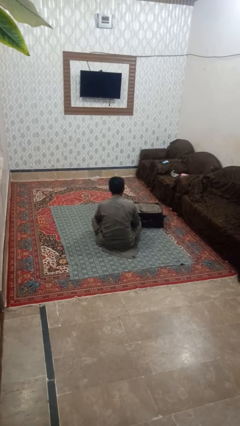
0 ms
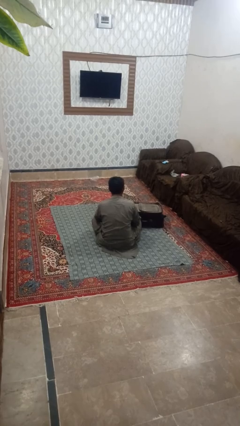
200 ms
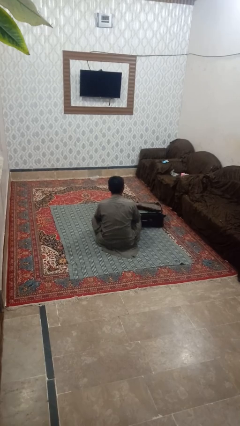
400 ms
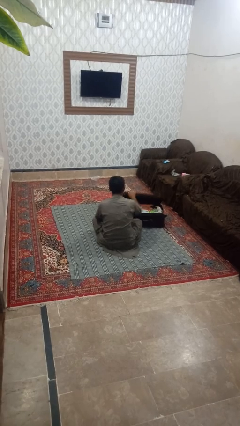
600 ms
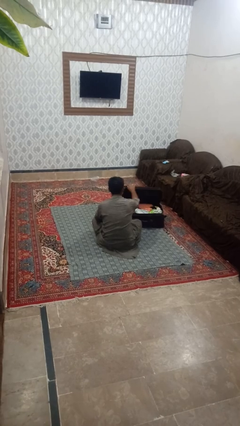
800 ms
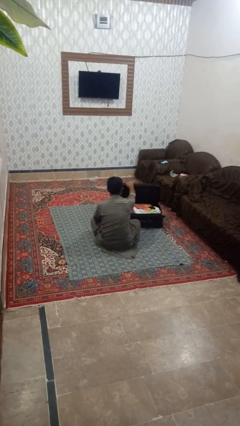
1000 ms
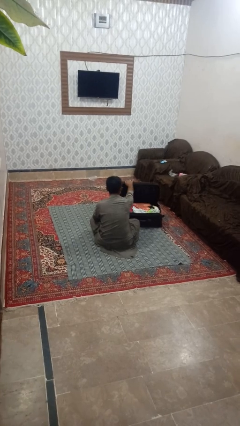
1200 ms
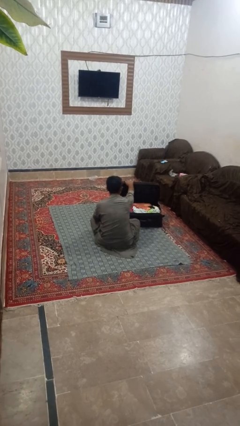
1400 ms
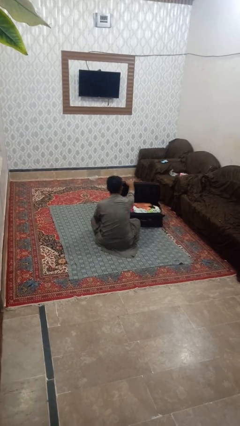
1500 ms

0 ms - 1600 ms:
person opens suitcase

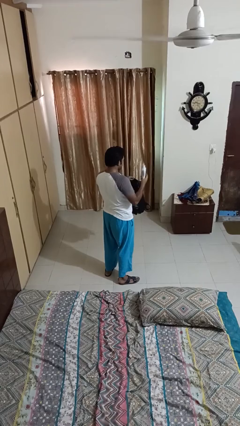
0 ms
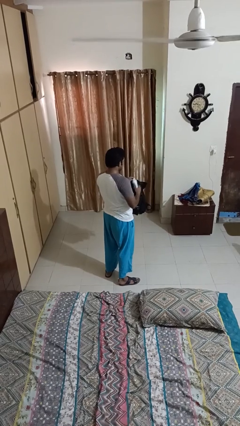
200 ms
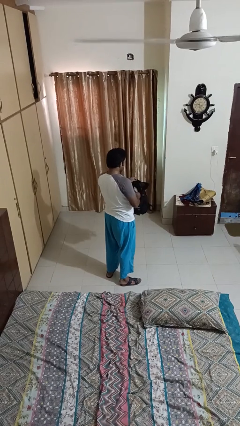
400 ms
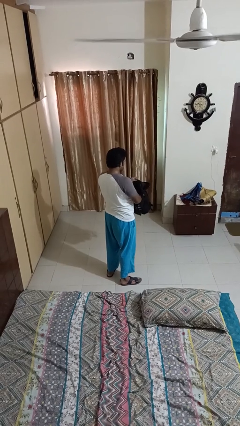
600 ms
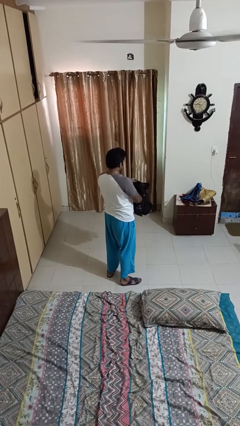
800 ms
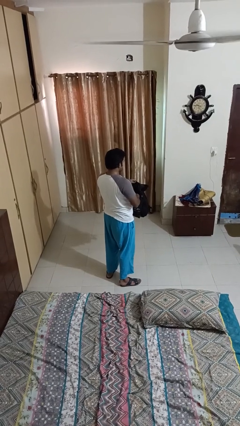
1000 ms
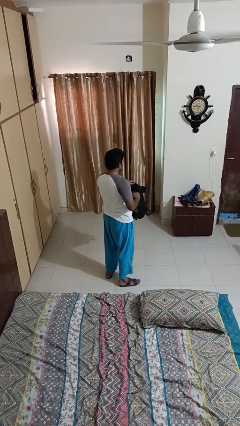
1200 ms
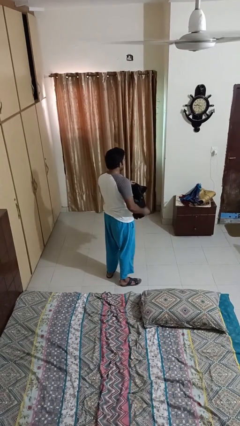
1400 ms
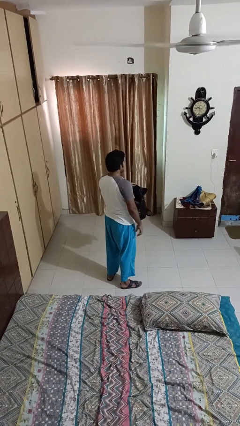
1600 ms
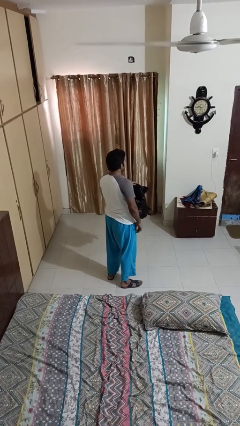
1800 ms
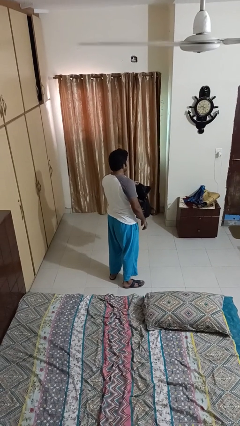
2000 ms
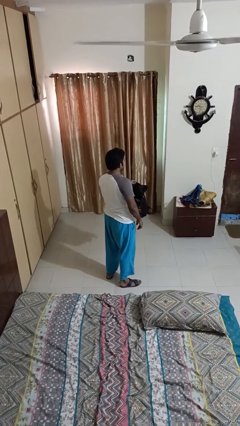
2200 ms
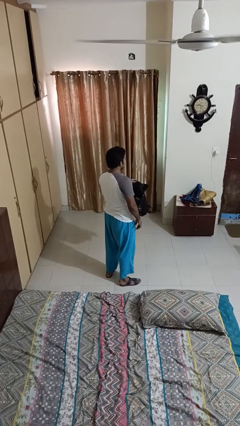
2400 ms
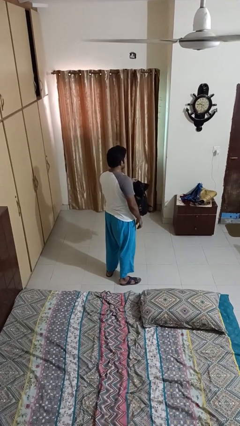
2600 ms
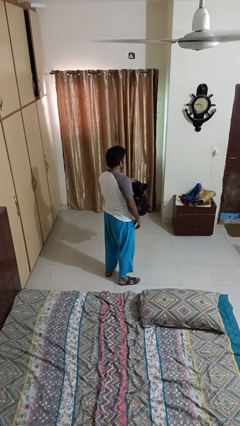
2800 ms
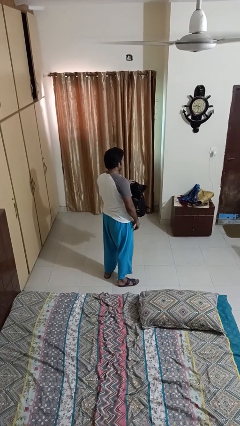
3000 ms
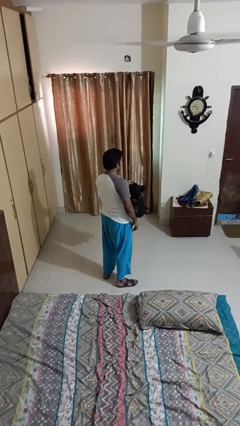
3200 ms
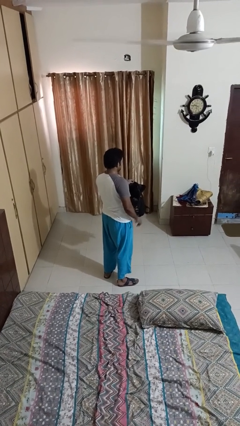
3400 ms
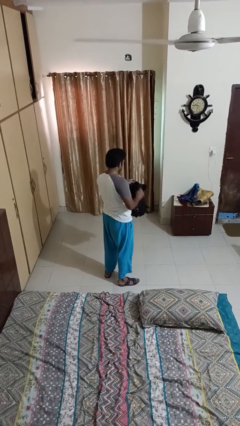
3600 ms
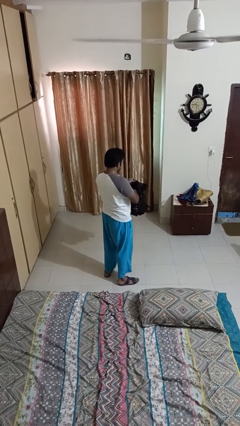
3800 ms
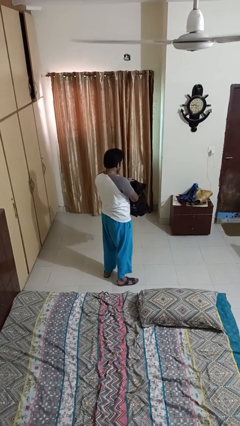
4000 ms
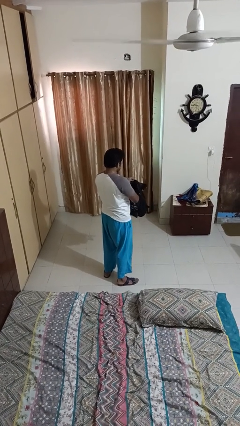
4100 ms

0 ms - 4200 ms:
person stands up

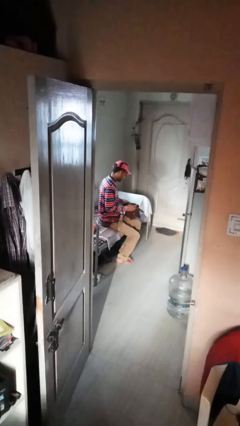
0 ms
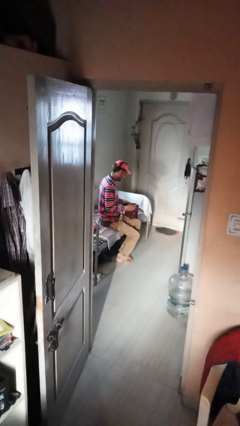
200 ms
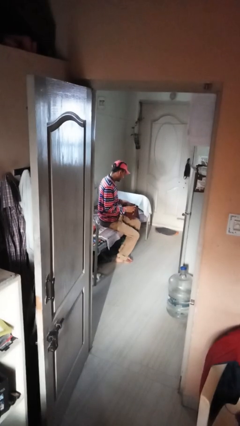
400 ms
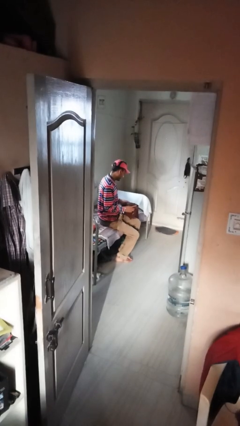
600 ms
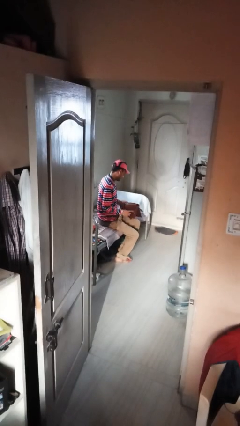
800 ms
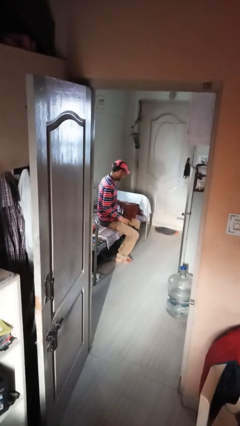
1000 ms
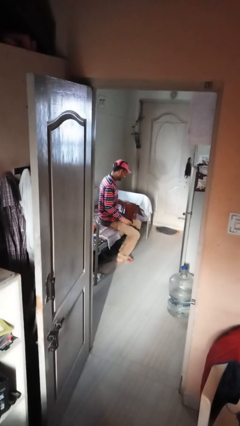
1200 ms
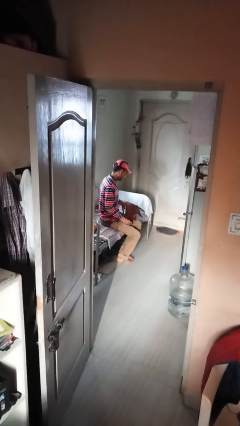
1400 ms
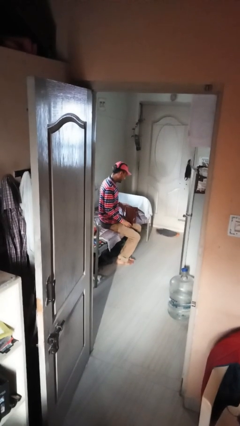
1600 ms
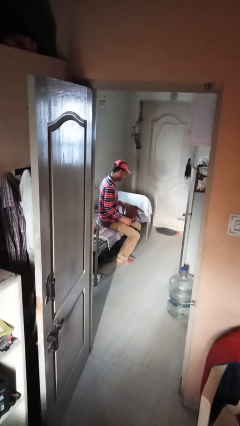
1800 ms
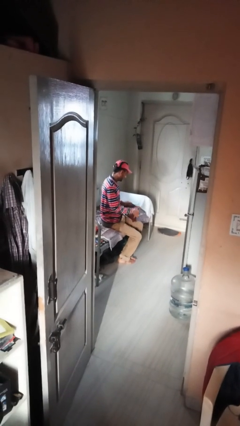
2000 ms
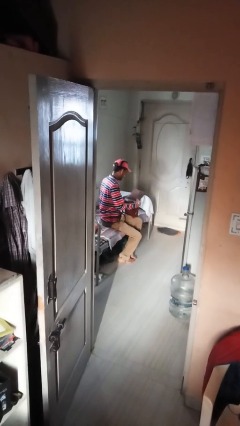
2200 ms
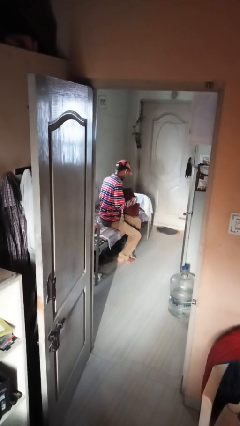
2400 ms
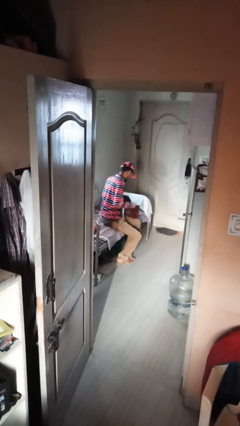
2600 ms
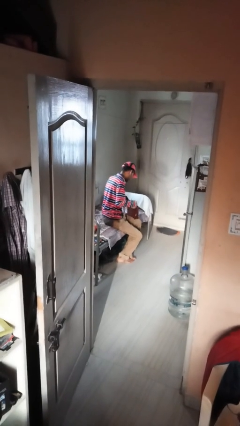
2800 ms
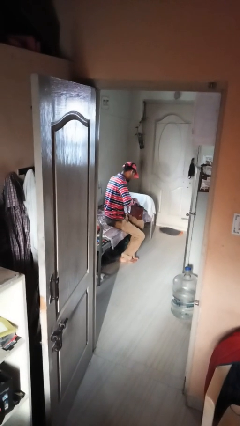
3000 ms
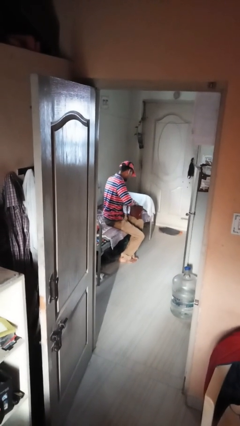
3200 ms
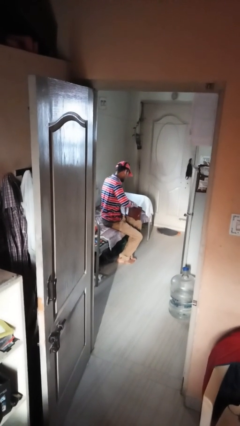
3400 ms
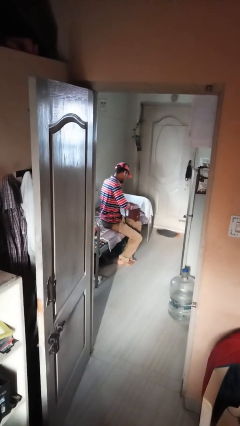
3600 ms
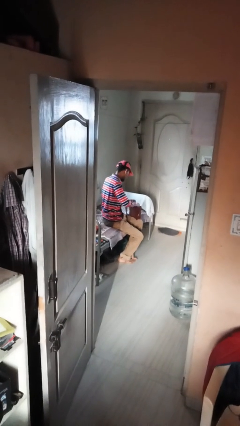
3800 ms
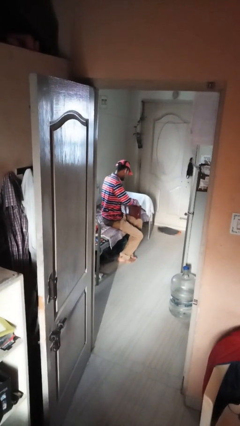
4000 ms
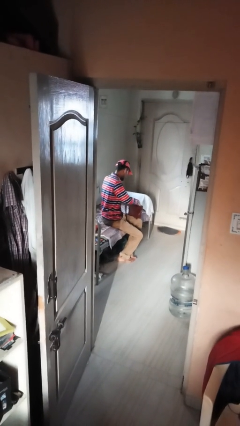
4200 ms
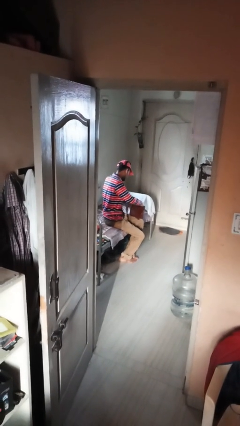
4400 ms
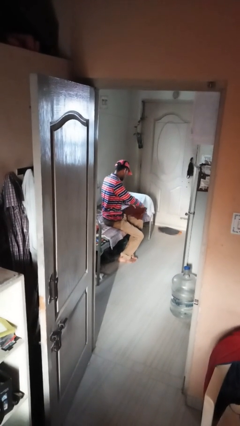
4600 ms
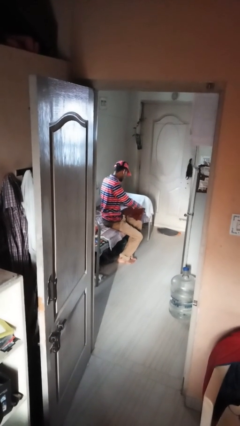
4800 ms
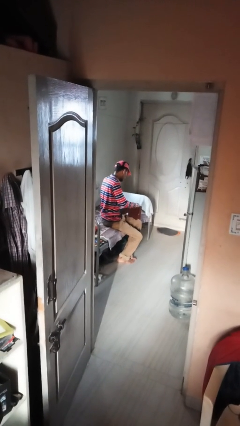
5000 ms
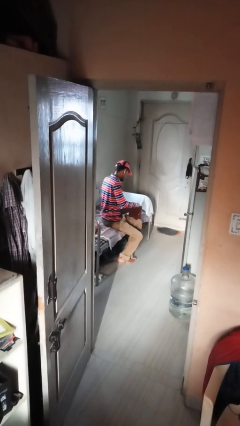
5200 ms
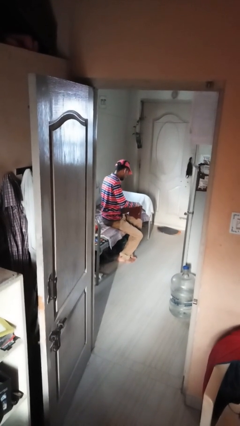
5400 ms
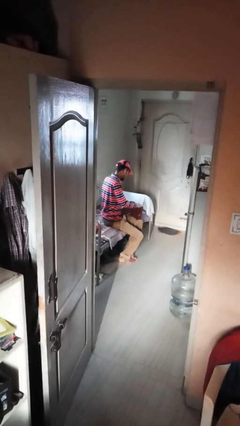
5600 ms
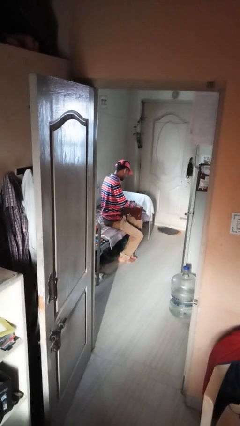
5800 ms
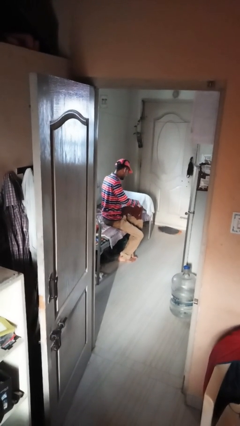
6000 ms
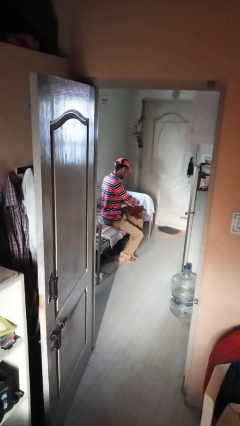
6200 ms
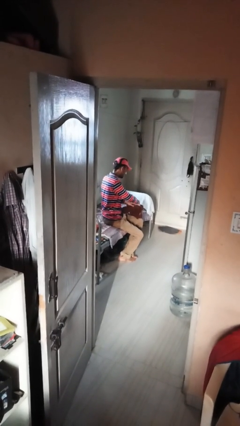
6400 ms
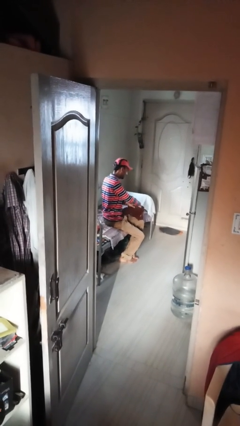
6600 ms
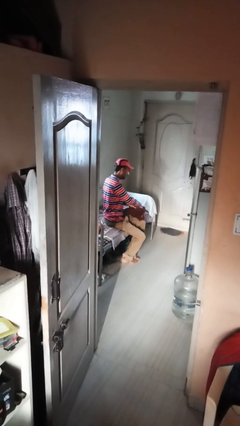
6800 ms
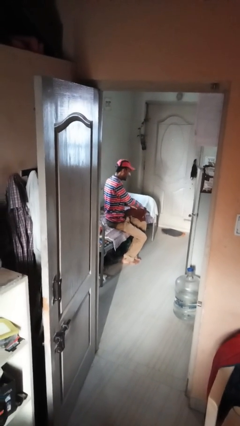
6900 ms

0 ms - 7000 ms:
person searches in purse

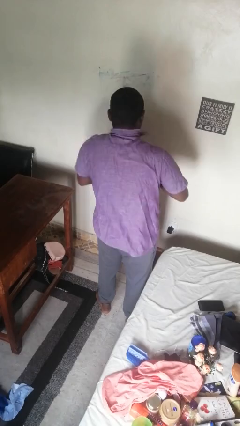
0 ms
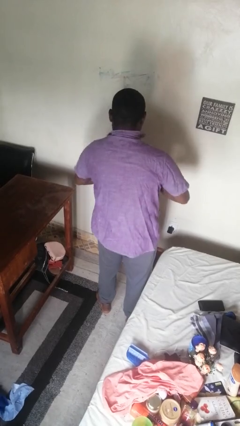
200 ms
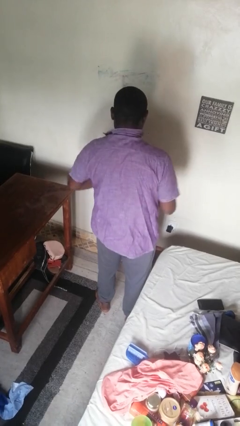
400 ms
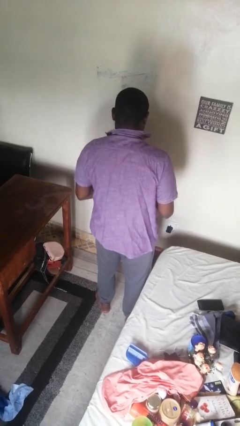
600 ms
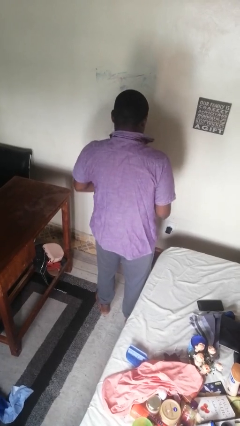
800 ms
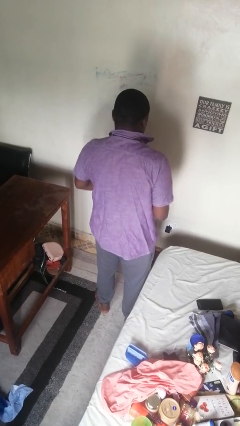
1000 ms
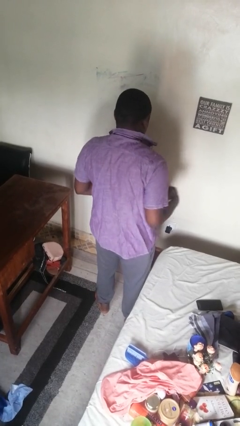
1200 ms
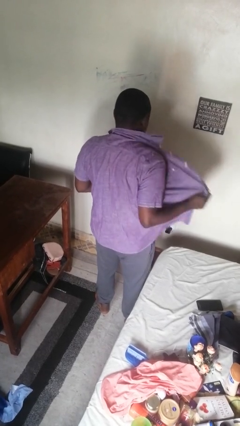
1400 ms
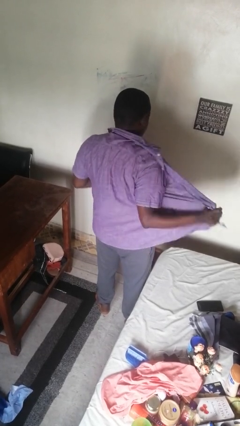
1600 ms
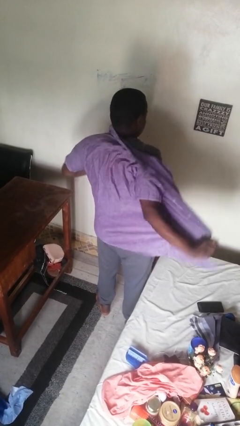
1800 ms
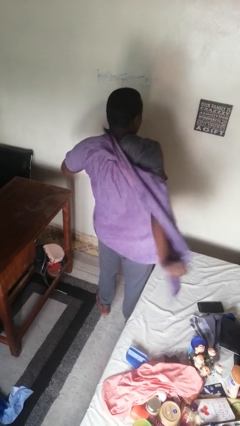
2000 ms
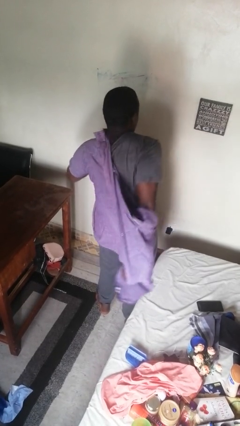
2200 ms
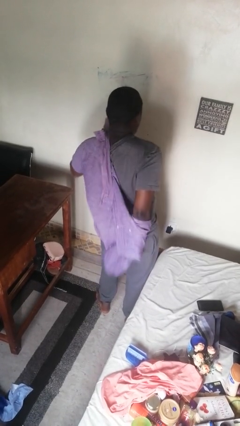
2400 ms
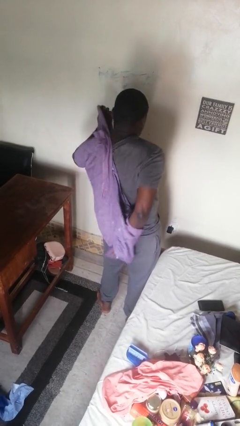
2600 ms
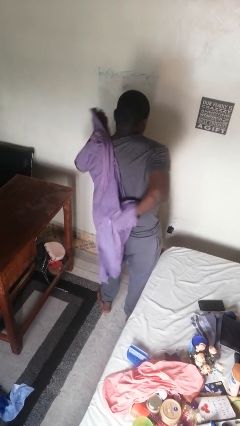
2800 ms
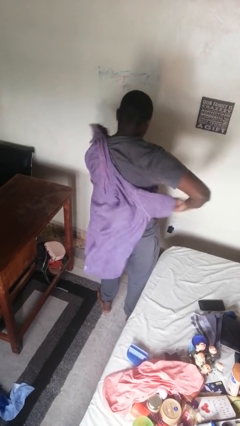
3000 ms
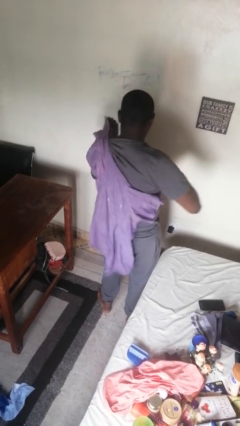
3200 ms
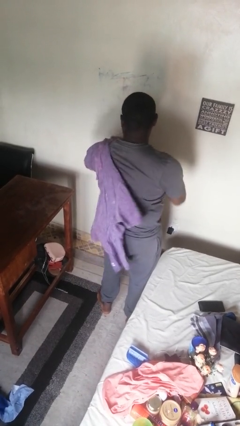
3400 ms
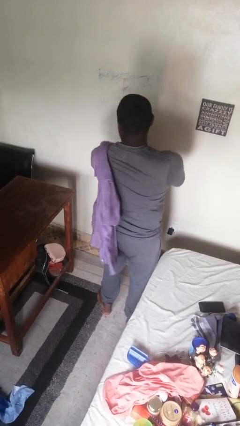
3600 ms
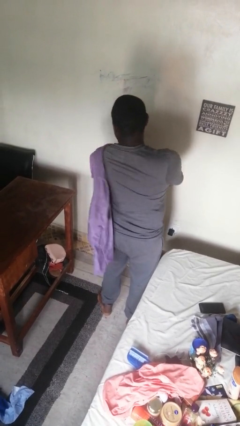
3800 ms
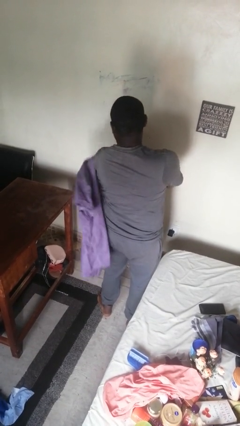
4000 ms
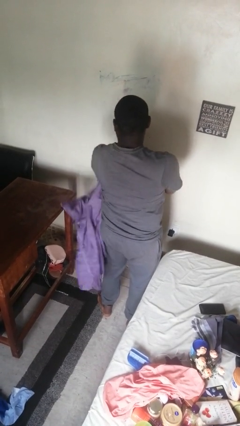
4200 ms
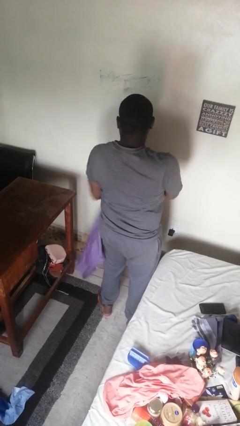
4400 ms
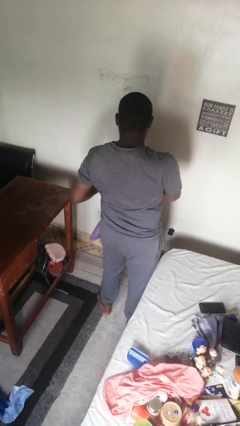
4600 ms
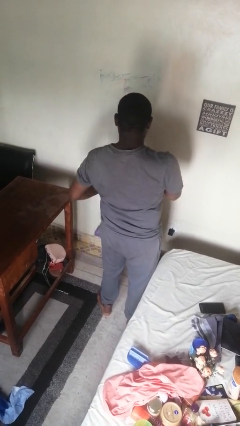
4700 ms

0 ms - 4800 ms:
person takes off shirt

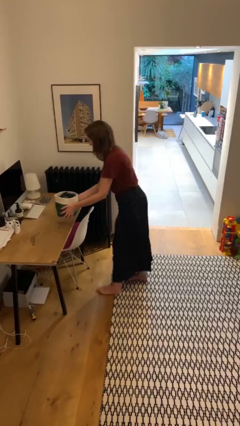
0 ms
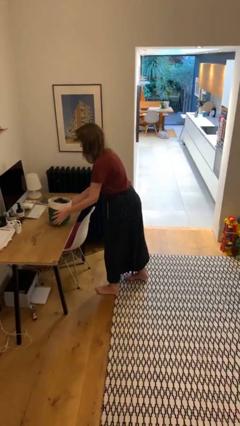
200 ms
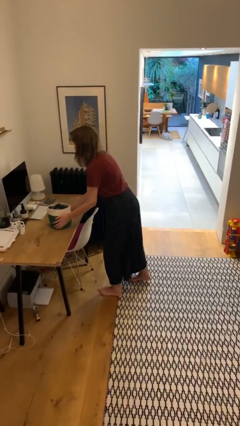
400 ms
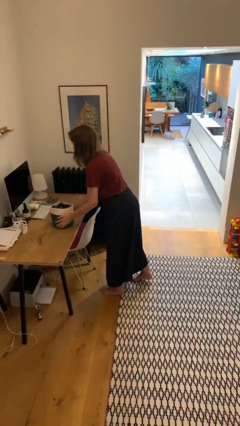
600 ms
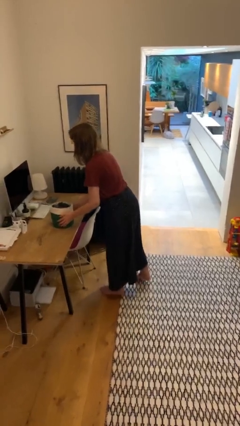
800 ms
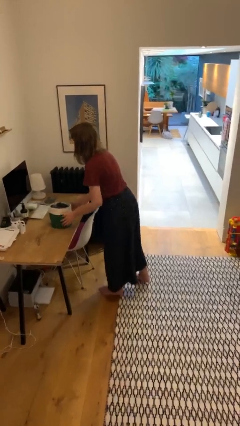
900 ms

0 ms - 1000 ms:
person puts down object on table
